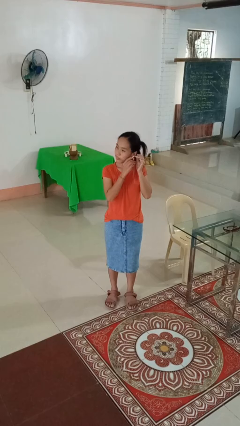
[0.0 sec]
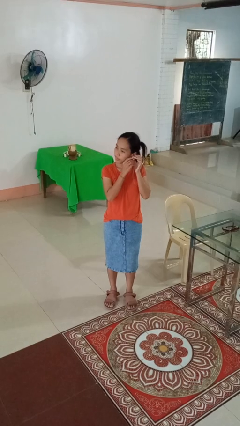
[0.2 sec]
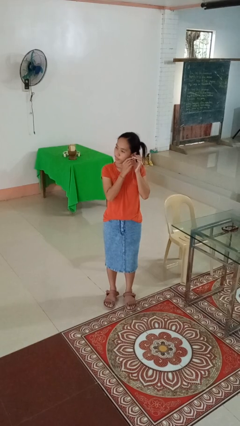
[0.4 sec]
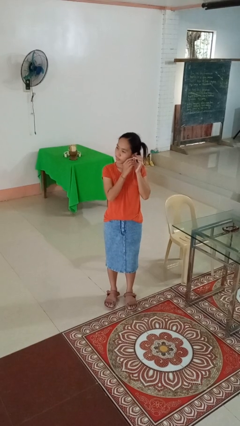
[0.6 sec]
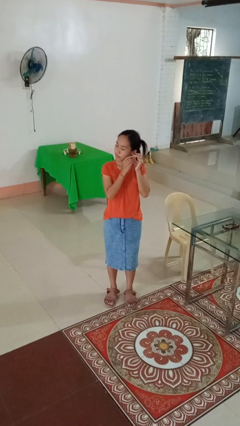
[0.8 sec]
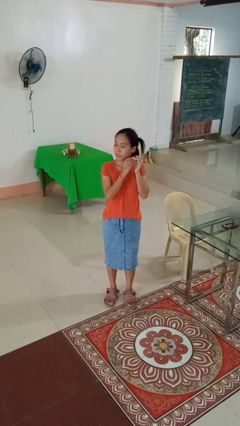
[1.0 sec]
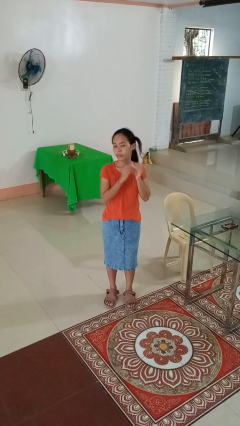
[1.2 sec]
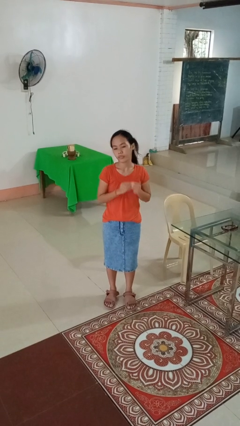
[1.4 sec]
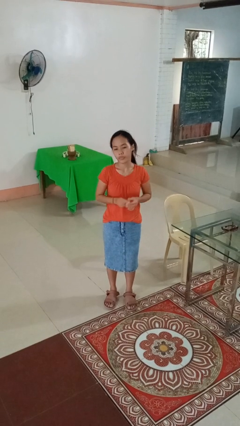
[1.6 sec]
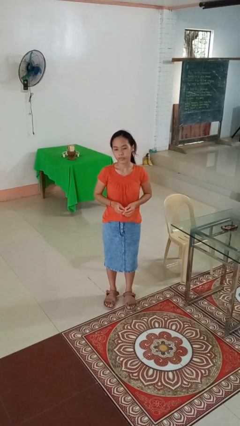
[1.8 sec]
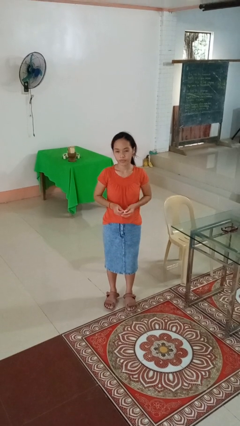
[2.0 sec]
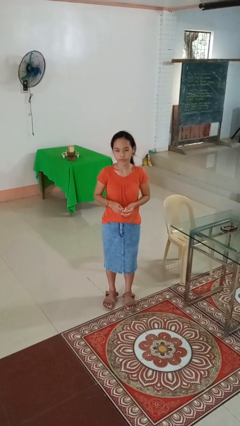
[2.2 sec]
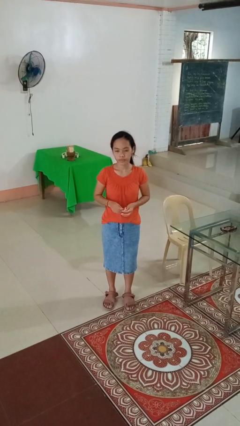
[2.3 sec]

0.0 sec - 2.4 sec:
person takes off earrings

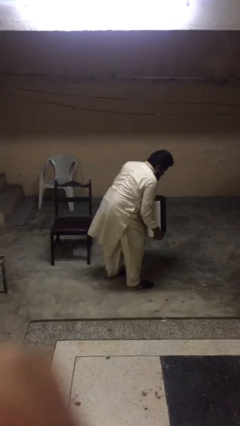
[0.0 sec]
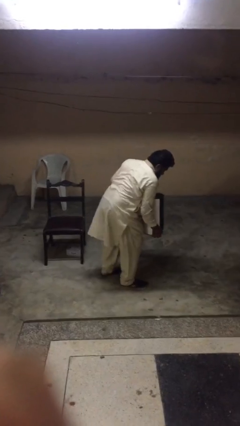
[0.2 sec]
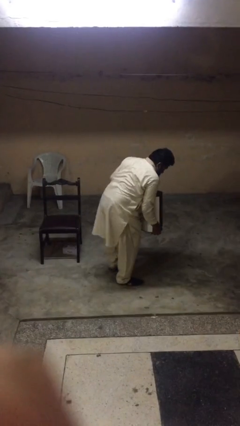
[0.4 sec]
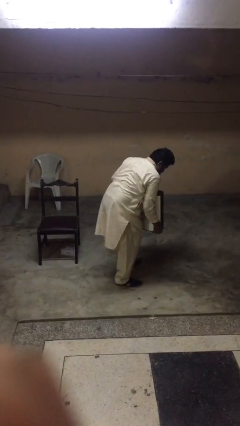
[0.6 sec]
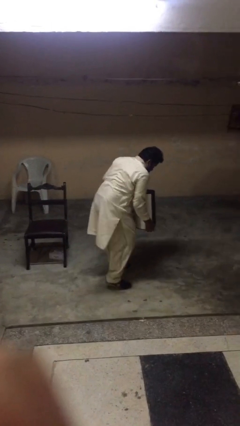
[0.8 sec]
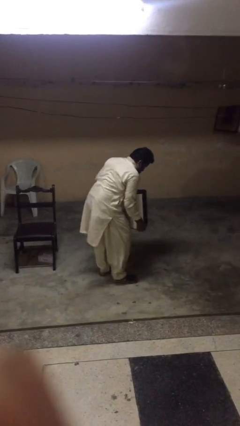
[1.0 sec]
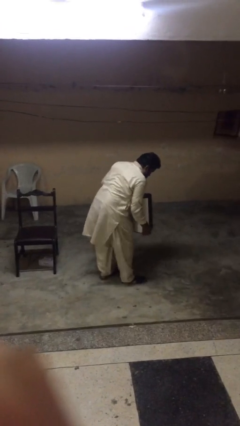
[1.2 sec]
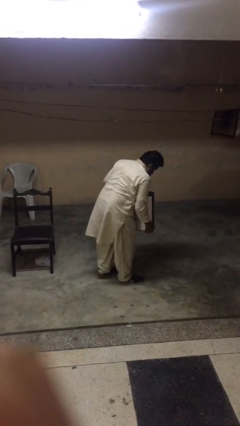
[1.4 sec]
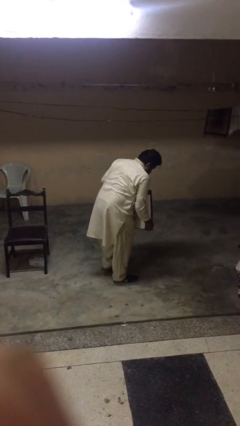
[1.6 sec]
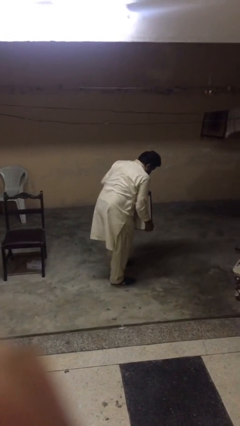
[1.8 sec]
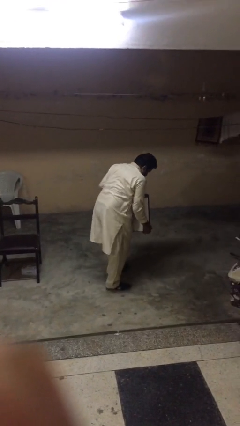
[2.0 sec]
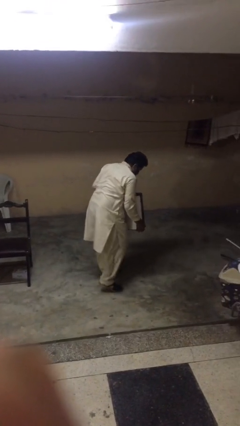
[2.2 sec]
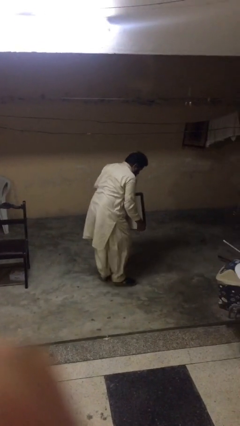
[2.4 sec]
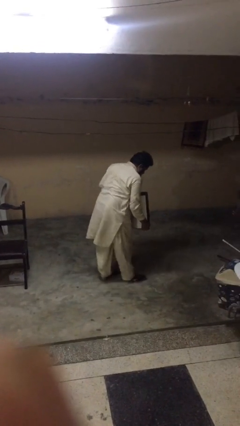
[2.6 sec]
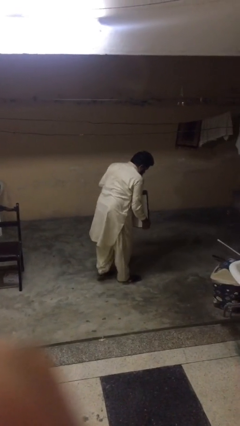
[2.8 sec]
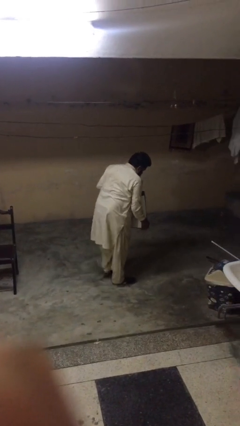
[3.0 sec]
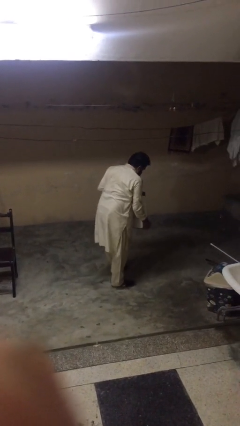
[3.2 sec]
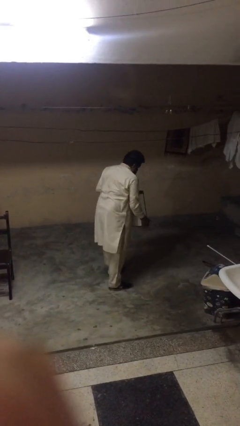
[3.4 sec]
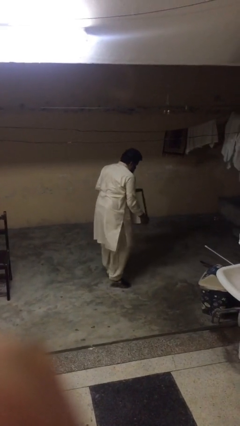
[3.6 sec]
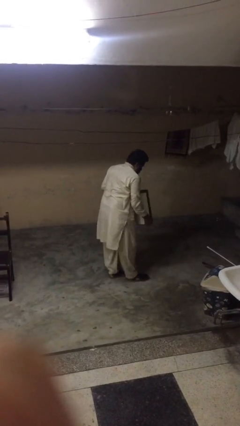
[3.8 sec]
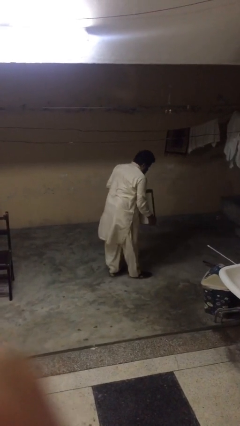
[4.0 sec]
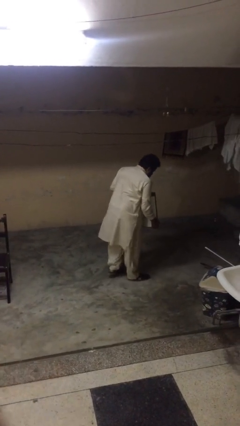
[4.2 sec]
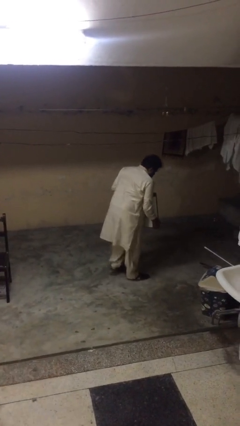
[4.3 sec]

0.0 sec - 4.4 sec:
person carries heavy object

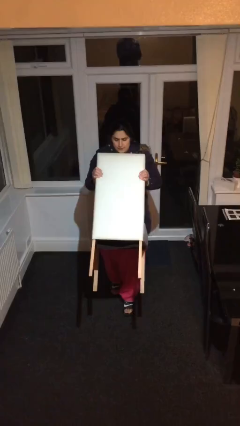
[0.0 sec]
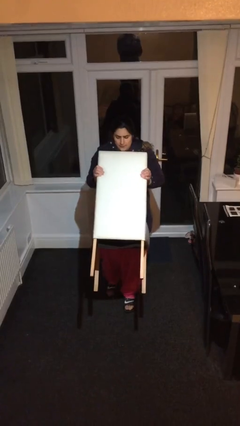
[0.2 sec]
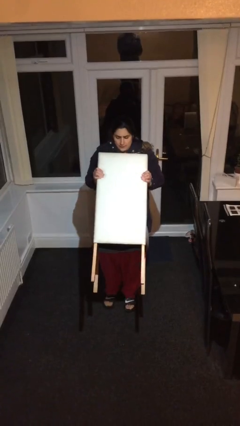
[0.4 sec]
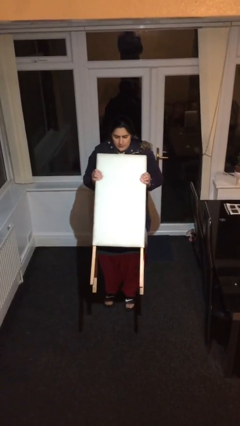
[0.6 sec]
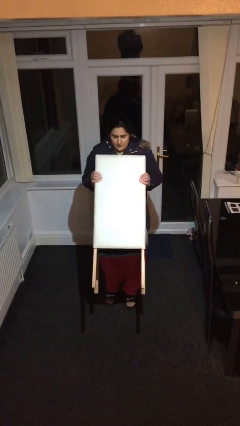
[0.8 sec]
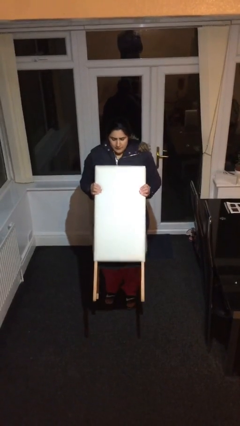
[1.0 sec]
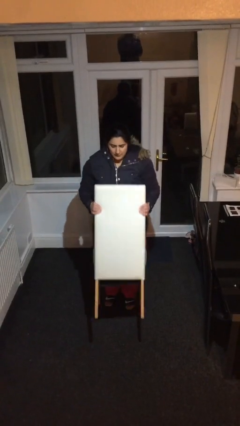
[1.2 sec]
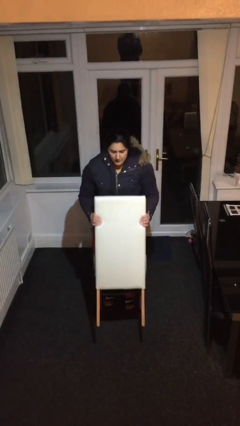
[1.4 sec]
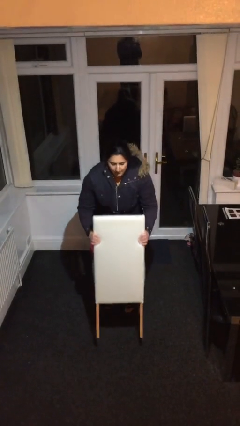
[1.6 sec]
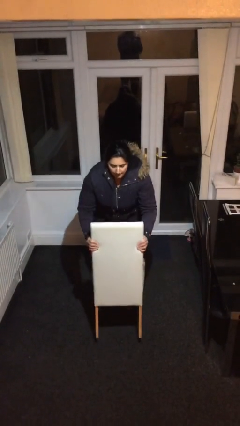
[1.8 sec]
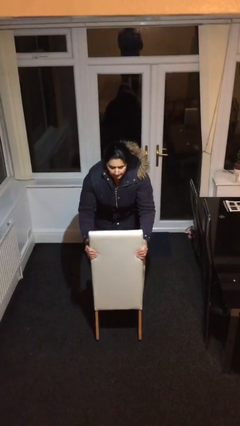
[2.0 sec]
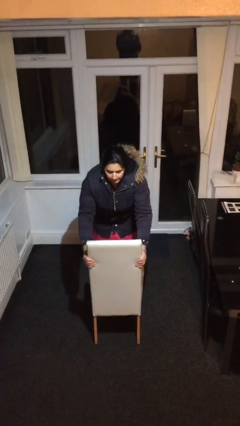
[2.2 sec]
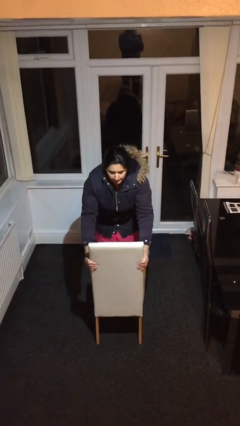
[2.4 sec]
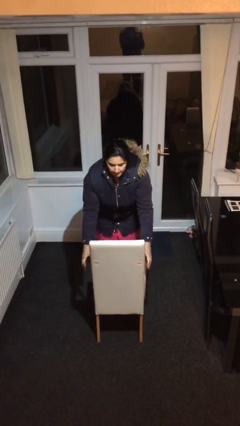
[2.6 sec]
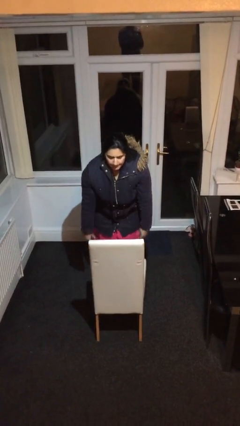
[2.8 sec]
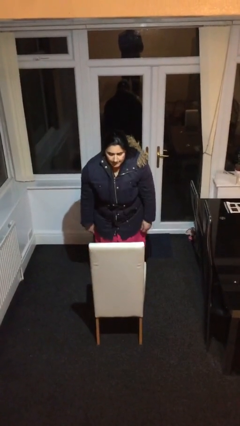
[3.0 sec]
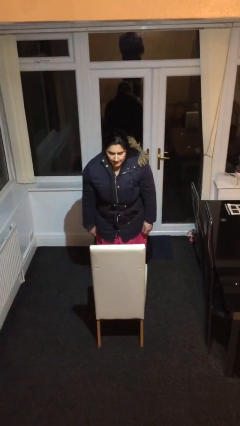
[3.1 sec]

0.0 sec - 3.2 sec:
person puts down object on floor

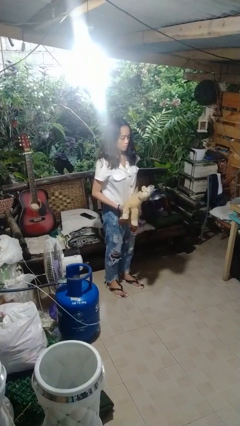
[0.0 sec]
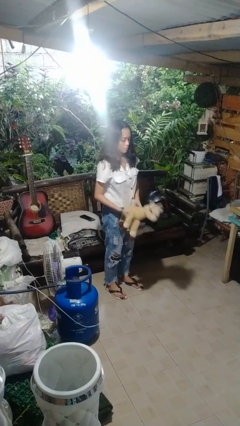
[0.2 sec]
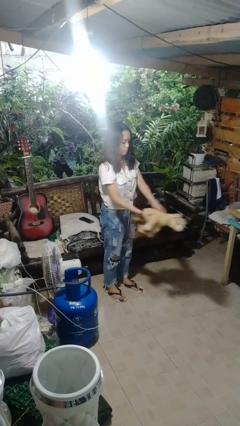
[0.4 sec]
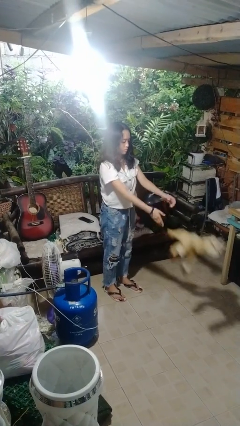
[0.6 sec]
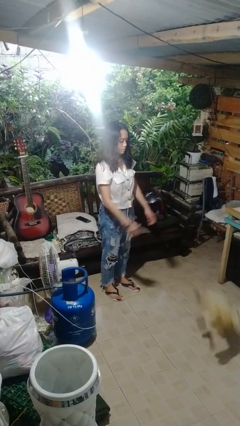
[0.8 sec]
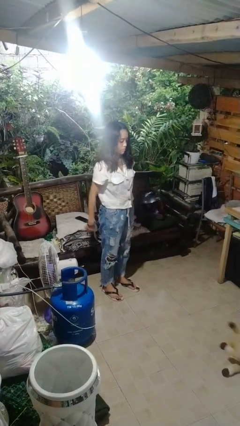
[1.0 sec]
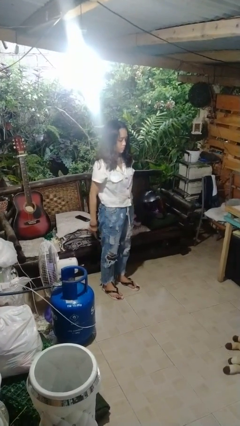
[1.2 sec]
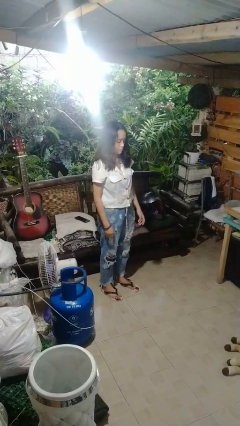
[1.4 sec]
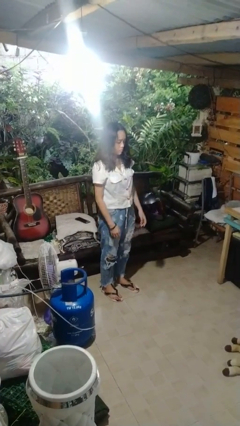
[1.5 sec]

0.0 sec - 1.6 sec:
person throws object to ground

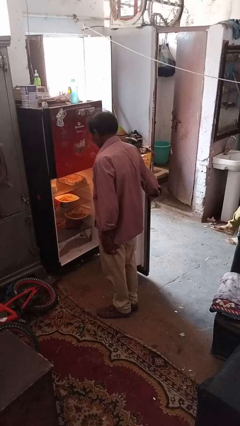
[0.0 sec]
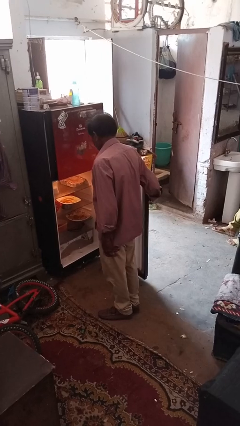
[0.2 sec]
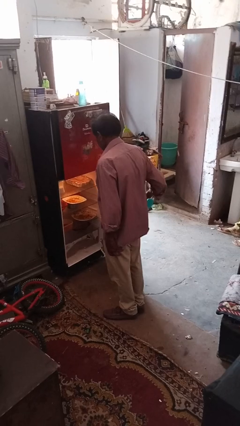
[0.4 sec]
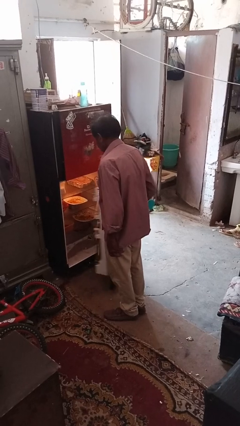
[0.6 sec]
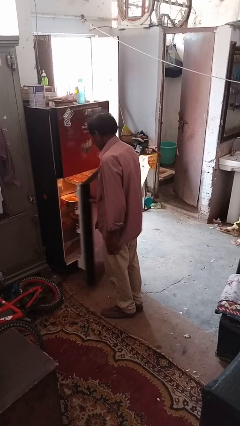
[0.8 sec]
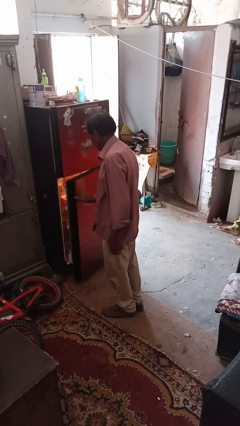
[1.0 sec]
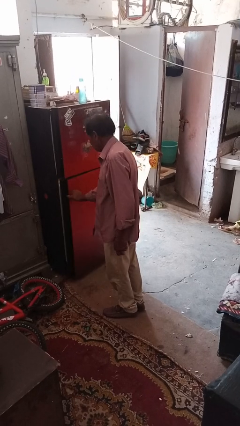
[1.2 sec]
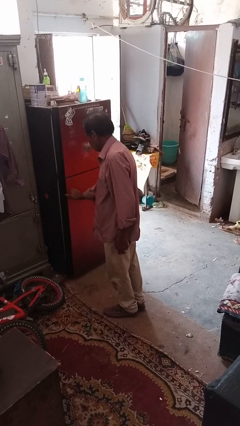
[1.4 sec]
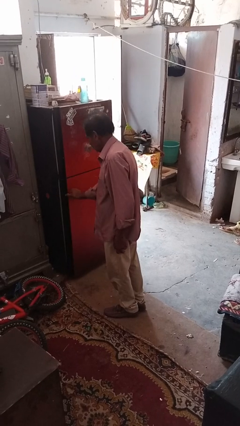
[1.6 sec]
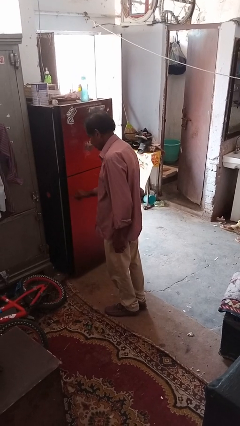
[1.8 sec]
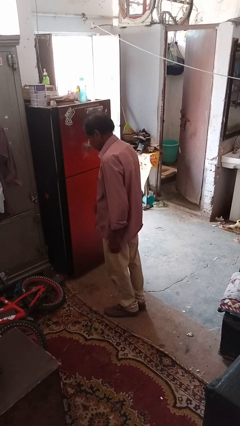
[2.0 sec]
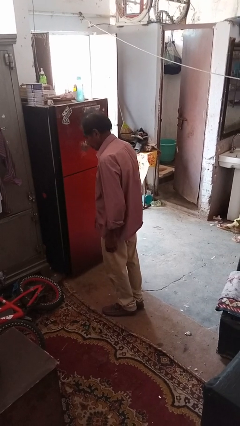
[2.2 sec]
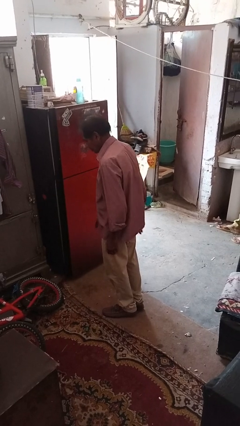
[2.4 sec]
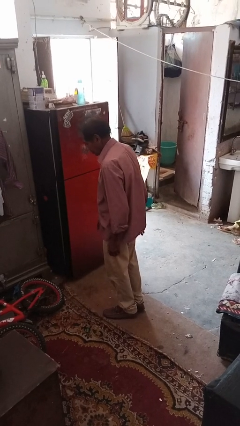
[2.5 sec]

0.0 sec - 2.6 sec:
person closes refrigerator

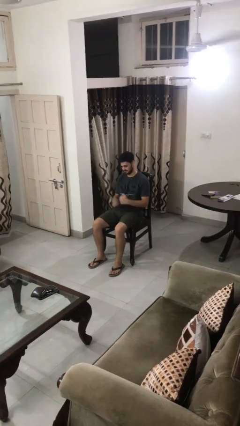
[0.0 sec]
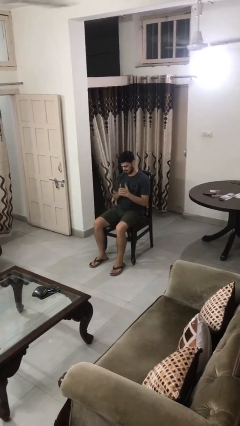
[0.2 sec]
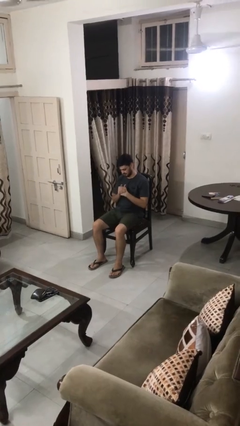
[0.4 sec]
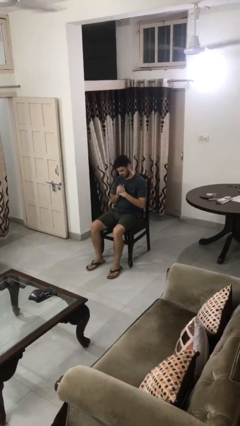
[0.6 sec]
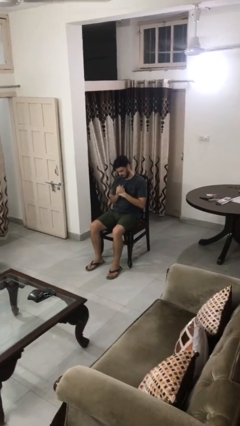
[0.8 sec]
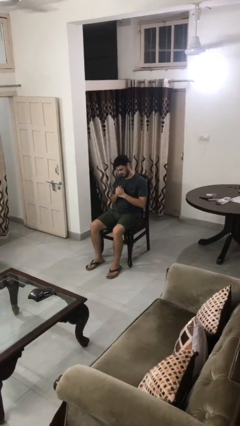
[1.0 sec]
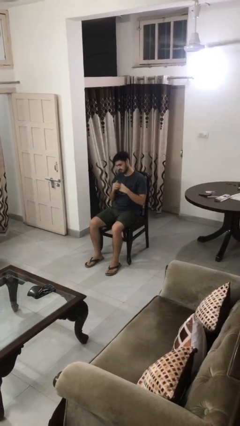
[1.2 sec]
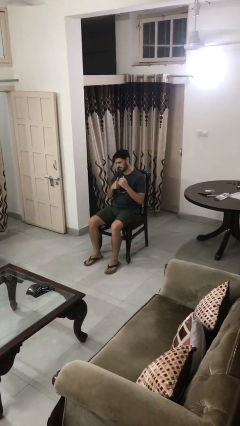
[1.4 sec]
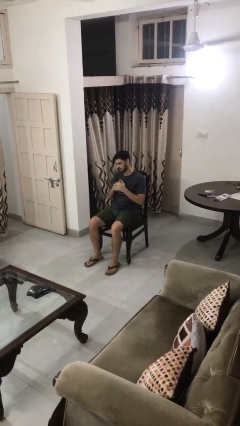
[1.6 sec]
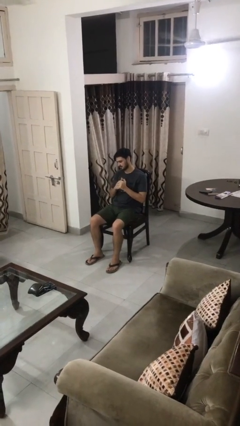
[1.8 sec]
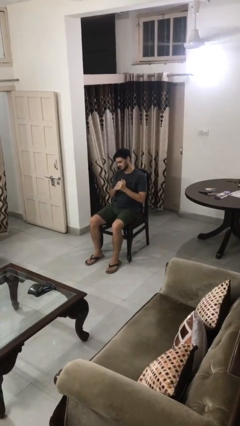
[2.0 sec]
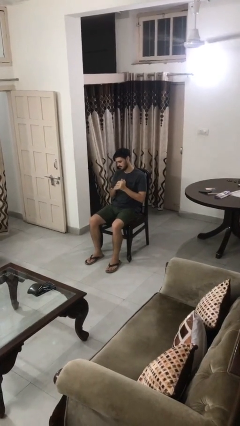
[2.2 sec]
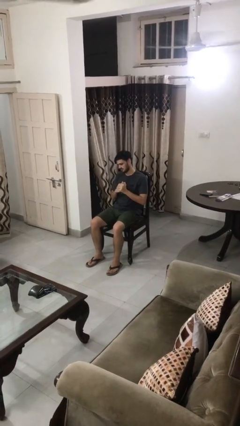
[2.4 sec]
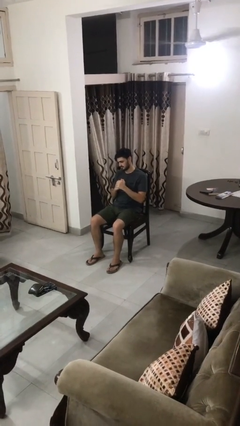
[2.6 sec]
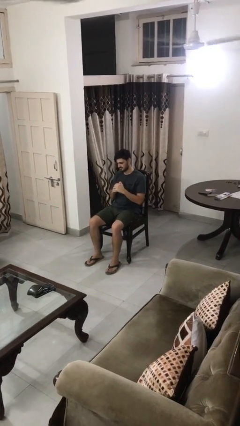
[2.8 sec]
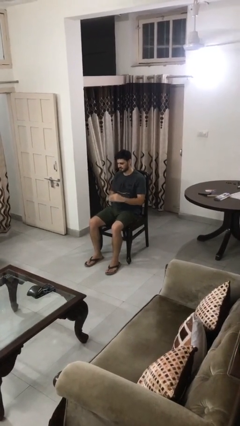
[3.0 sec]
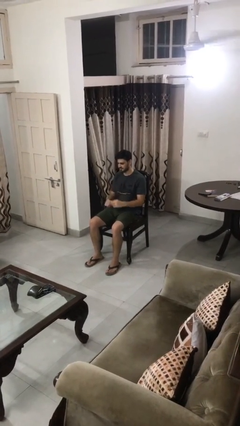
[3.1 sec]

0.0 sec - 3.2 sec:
person cracks knuckles
